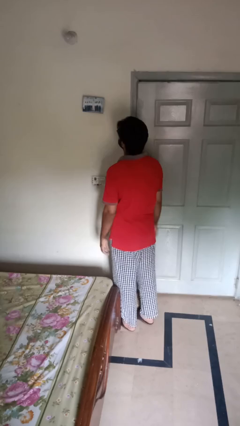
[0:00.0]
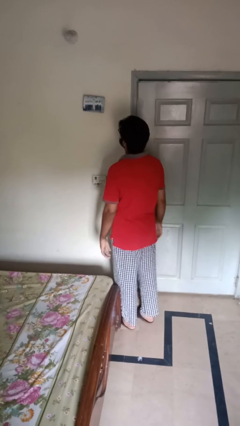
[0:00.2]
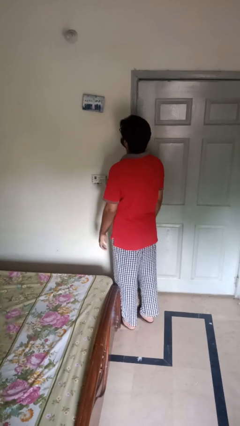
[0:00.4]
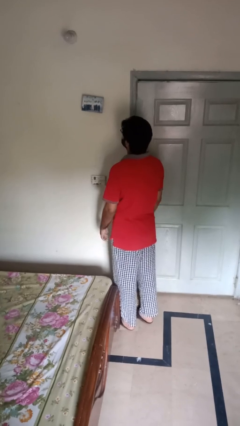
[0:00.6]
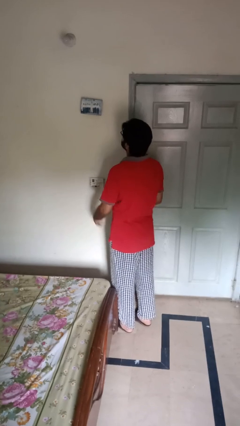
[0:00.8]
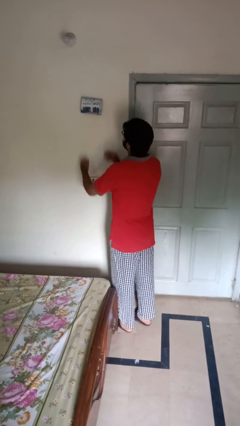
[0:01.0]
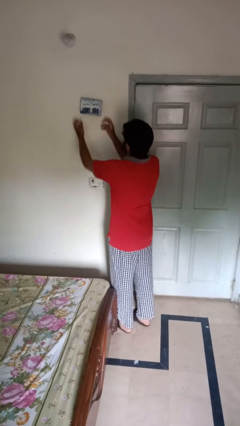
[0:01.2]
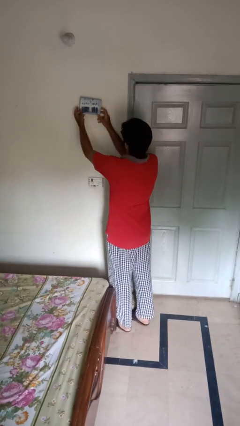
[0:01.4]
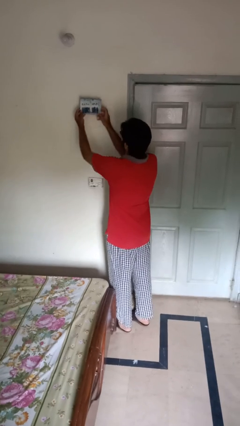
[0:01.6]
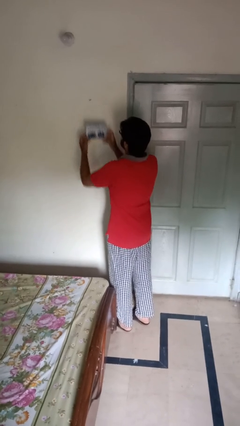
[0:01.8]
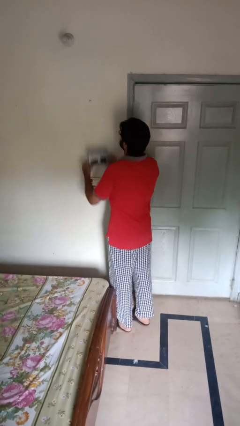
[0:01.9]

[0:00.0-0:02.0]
person takes down picture frame

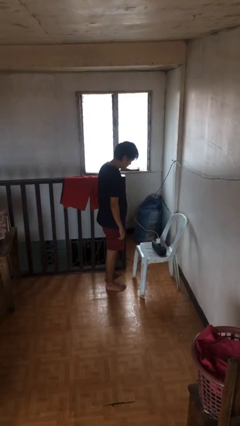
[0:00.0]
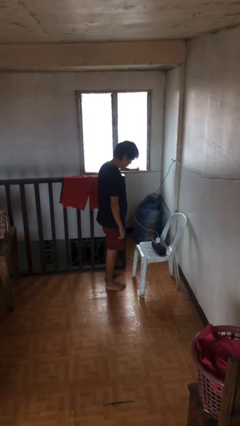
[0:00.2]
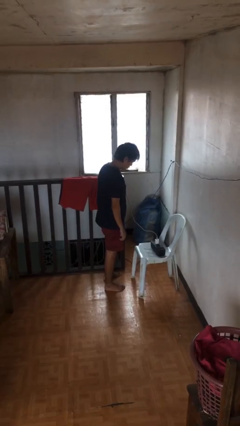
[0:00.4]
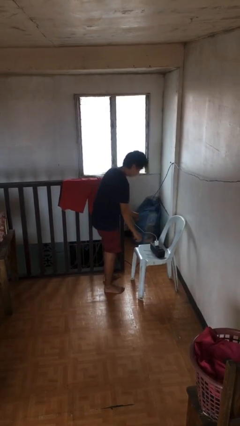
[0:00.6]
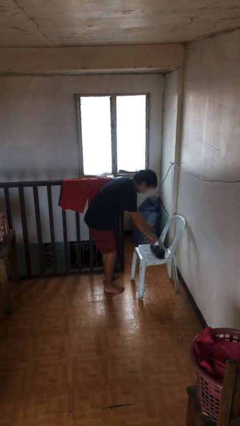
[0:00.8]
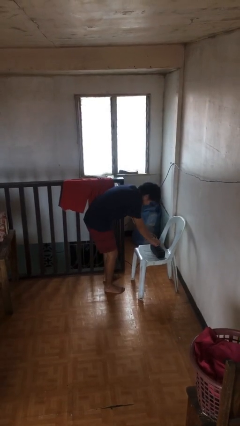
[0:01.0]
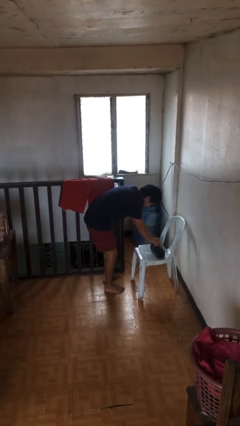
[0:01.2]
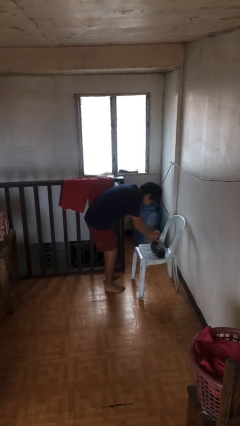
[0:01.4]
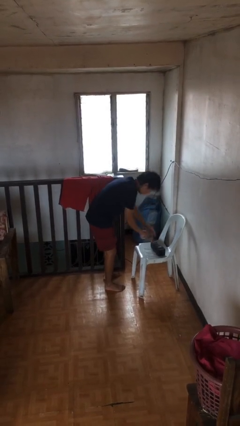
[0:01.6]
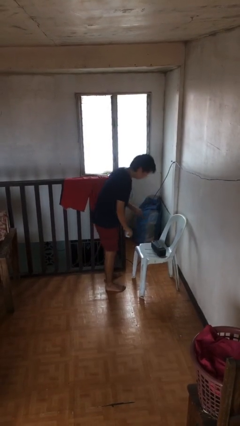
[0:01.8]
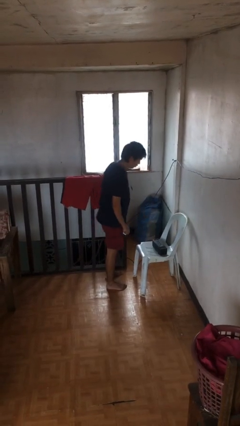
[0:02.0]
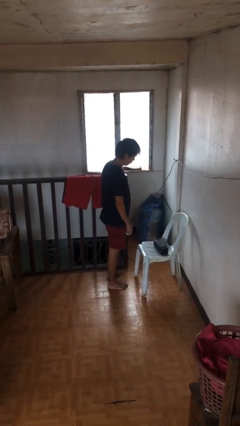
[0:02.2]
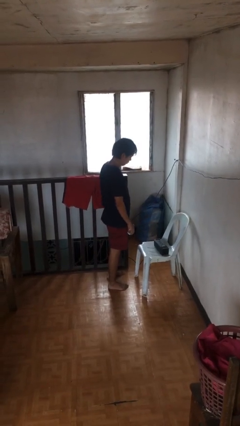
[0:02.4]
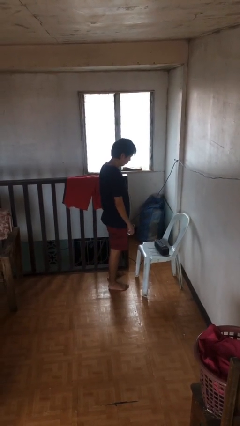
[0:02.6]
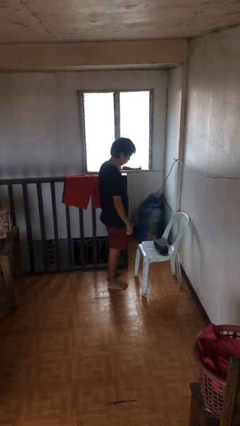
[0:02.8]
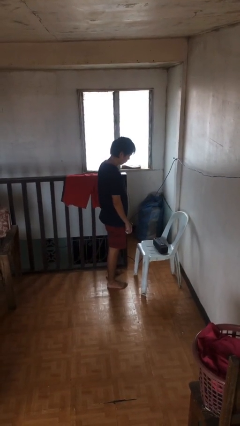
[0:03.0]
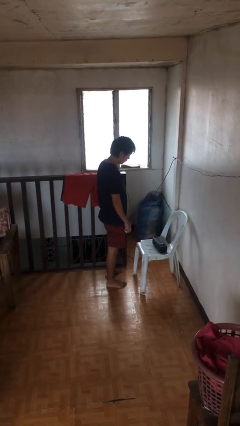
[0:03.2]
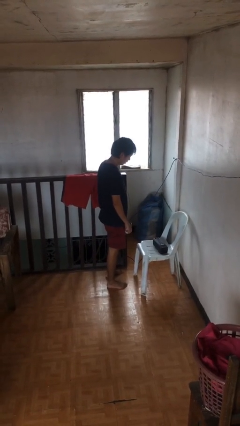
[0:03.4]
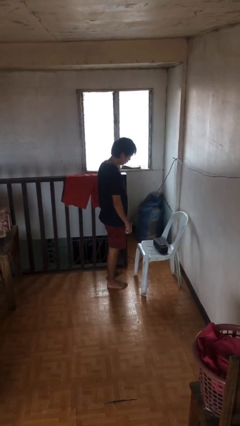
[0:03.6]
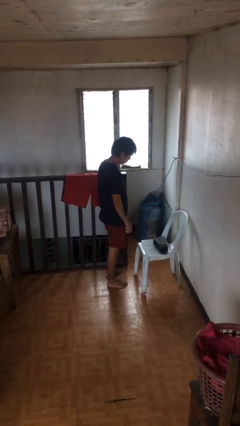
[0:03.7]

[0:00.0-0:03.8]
person unplugs from electrical socket

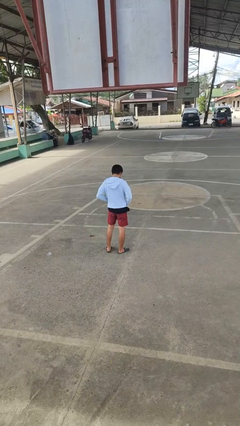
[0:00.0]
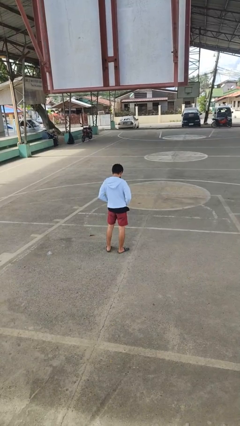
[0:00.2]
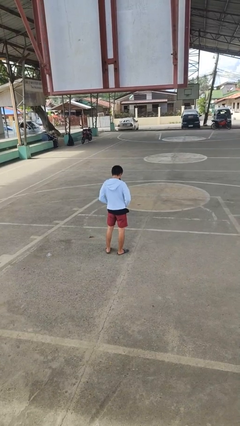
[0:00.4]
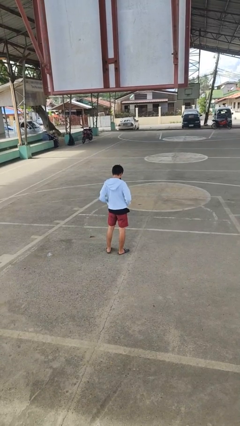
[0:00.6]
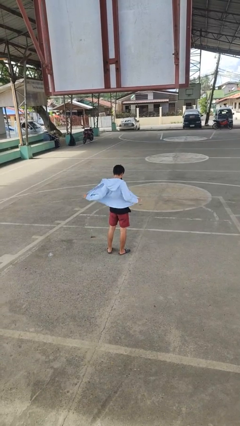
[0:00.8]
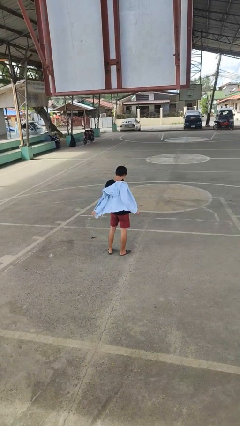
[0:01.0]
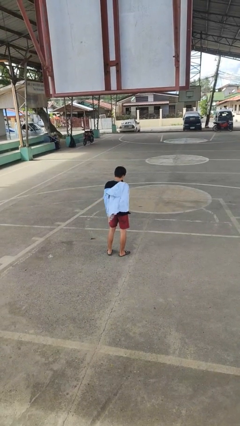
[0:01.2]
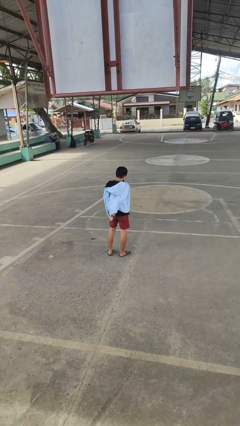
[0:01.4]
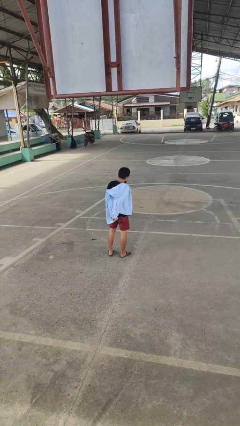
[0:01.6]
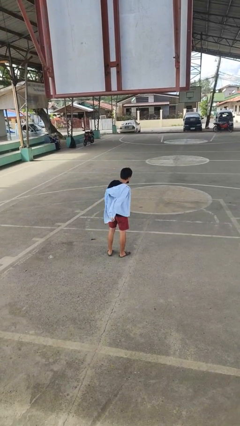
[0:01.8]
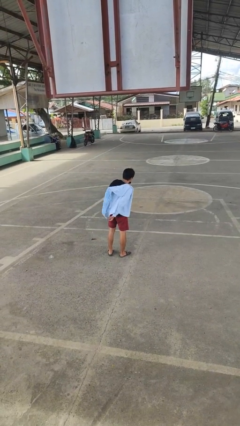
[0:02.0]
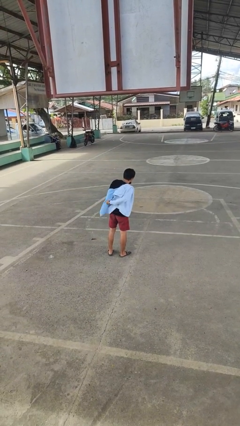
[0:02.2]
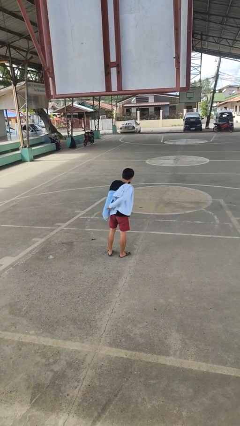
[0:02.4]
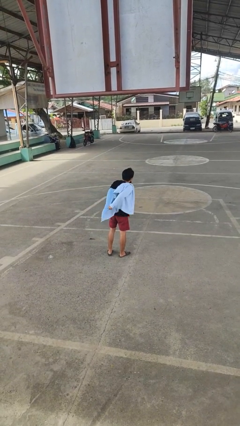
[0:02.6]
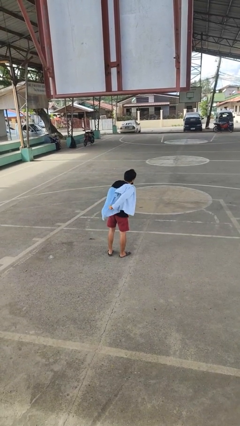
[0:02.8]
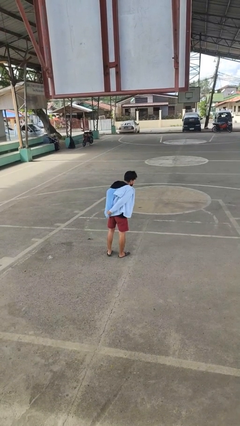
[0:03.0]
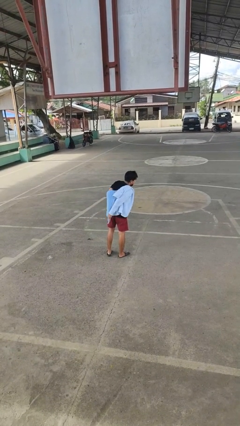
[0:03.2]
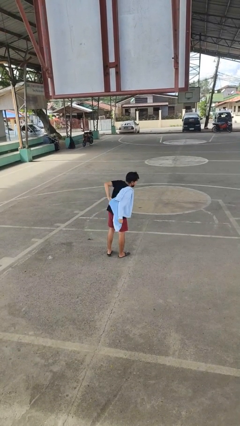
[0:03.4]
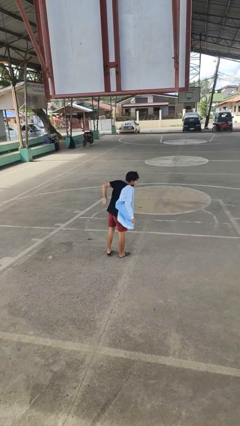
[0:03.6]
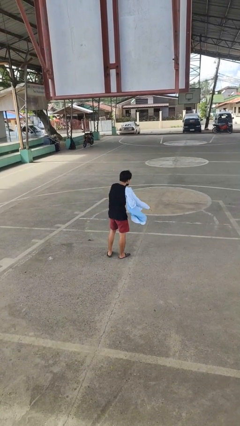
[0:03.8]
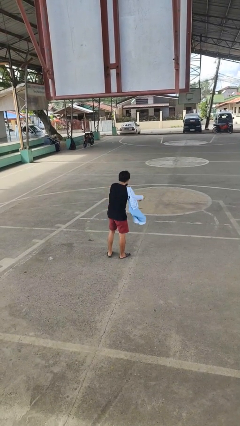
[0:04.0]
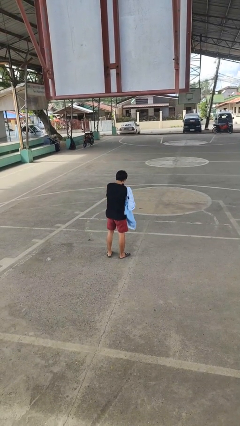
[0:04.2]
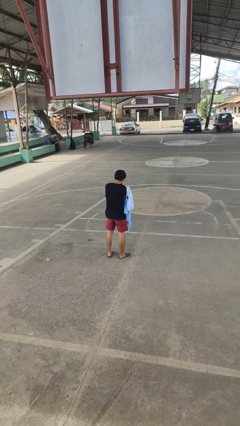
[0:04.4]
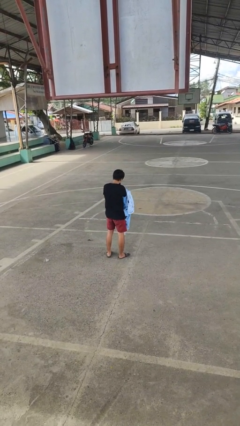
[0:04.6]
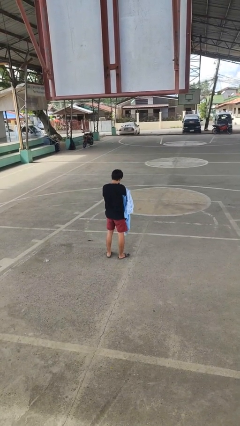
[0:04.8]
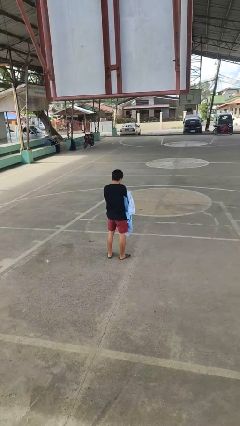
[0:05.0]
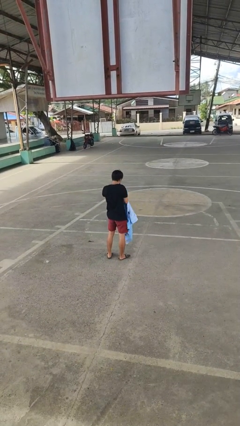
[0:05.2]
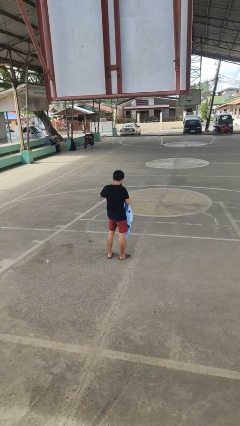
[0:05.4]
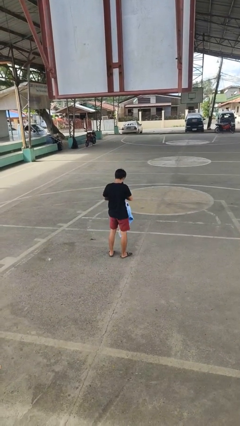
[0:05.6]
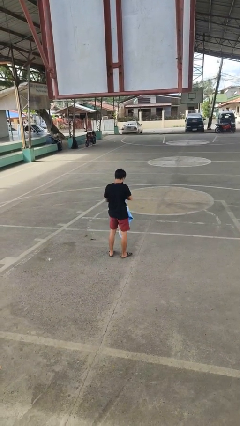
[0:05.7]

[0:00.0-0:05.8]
person takes off jacket

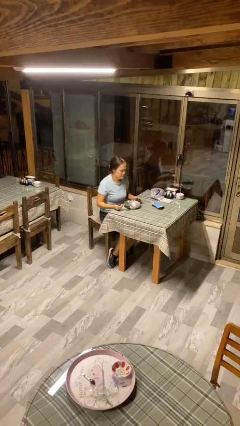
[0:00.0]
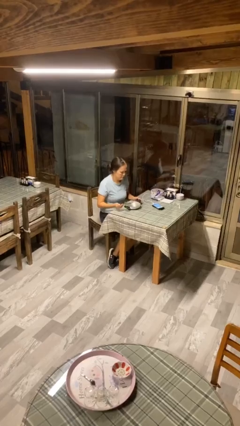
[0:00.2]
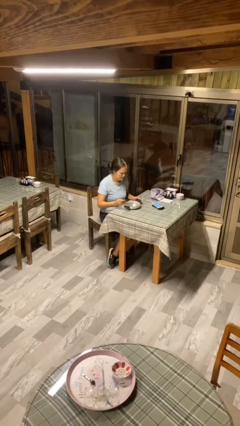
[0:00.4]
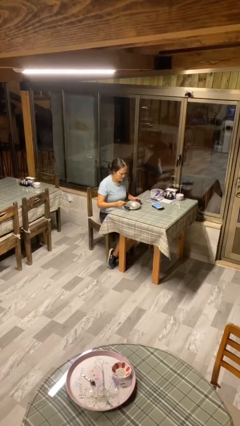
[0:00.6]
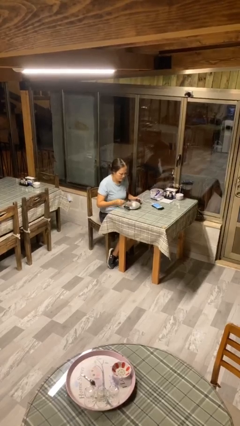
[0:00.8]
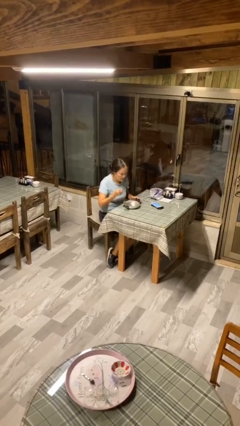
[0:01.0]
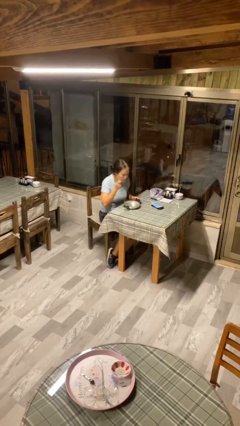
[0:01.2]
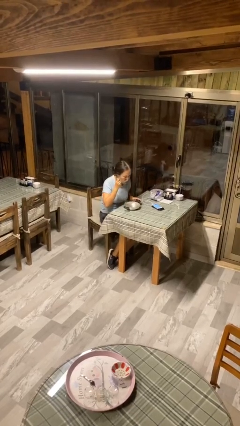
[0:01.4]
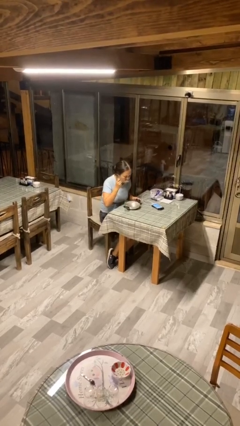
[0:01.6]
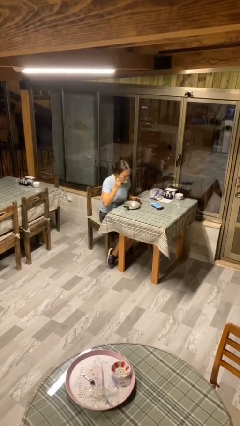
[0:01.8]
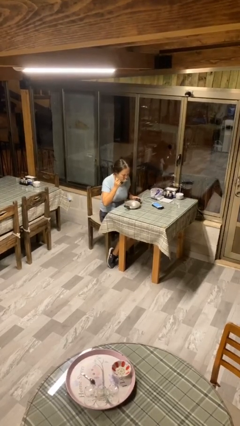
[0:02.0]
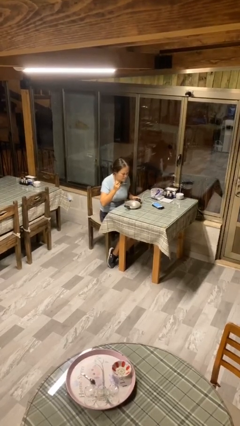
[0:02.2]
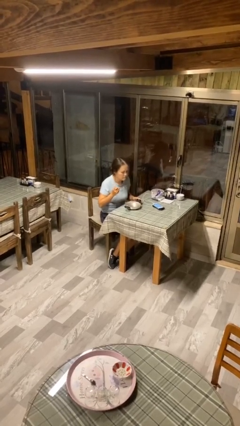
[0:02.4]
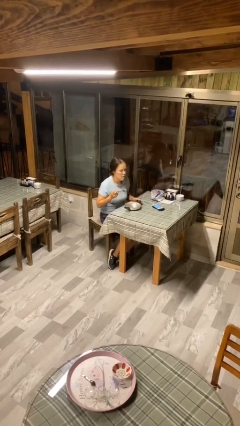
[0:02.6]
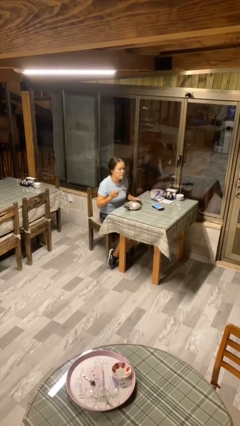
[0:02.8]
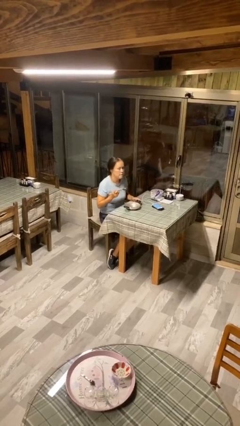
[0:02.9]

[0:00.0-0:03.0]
person eats with utensil

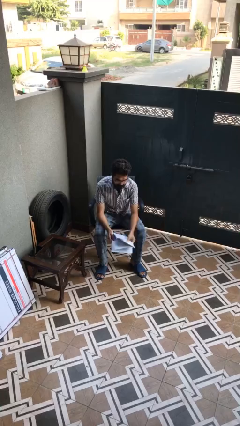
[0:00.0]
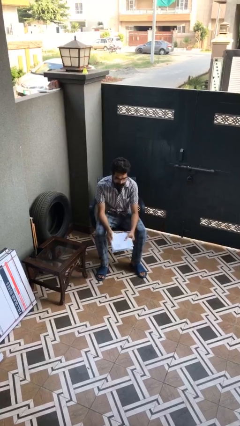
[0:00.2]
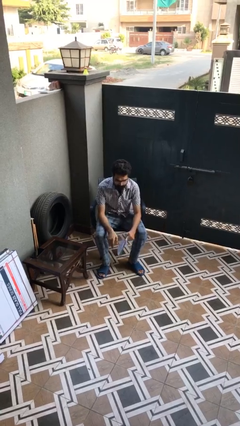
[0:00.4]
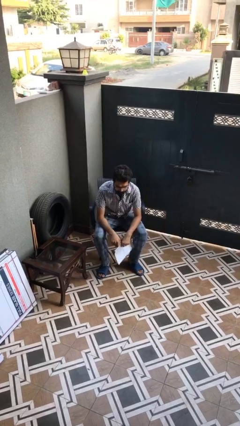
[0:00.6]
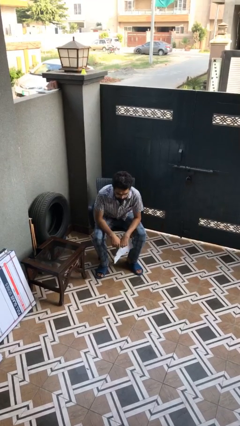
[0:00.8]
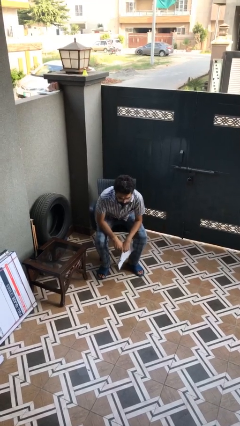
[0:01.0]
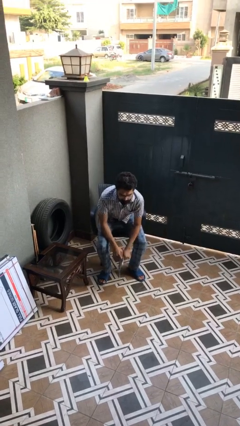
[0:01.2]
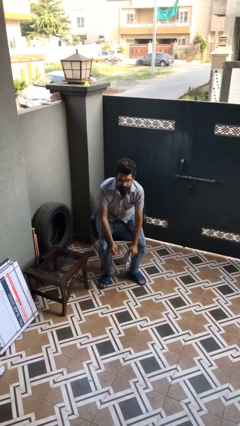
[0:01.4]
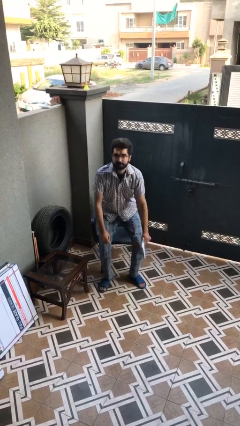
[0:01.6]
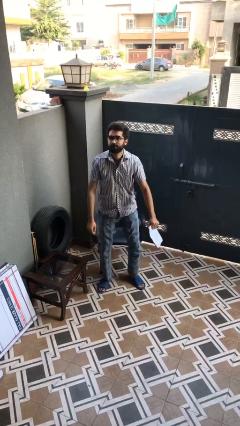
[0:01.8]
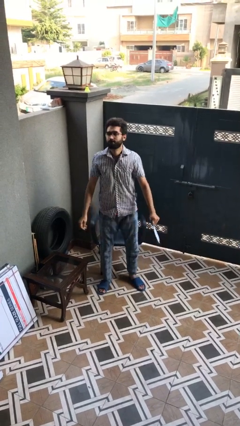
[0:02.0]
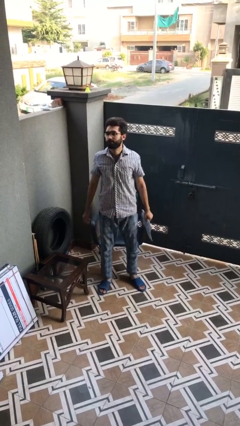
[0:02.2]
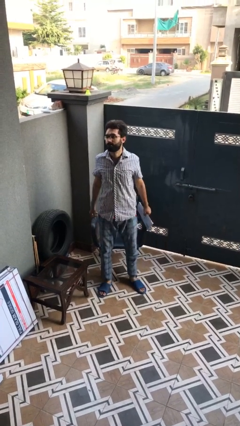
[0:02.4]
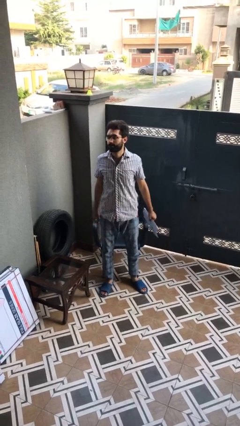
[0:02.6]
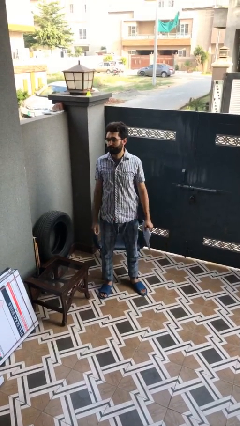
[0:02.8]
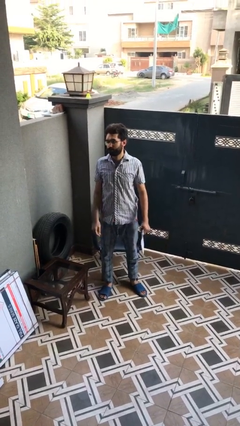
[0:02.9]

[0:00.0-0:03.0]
person stands up
